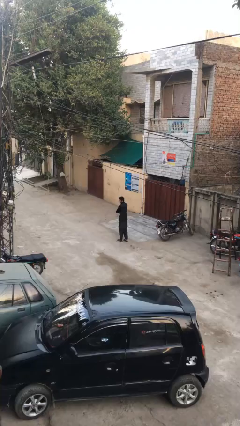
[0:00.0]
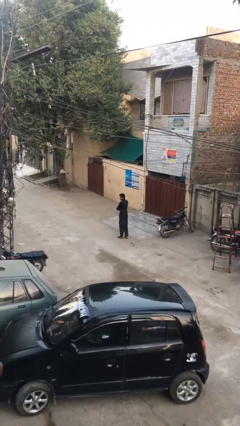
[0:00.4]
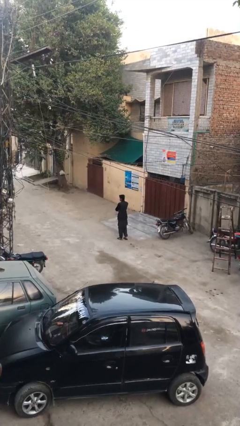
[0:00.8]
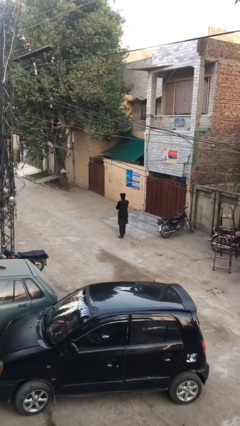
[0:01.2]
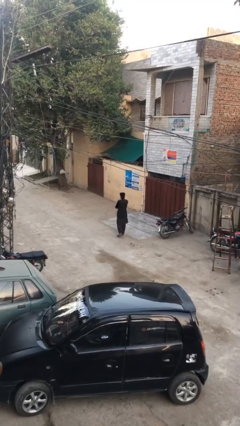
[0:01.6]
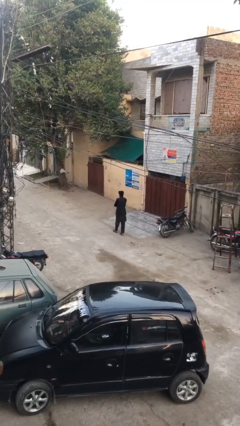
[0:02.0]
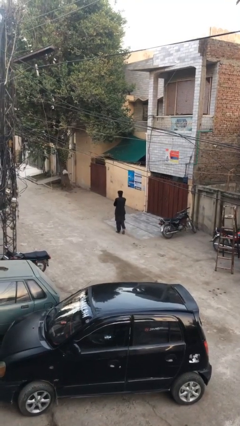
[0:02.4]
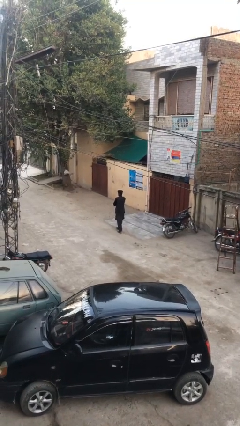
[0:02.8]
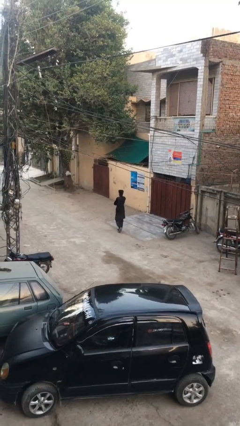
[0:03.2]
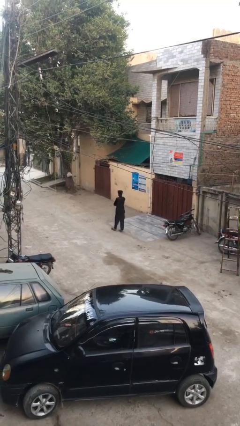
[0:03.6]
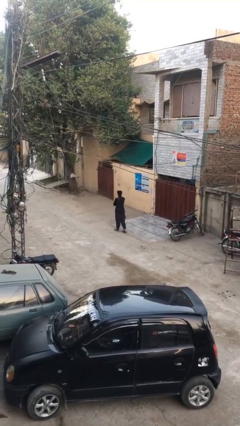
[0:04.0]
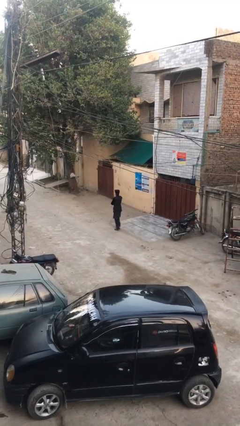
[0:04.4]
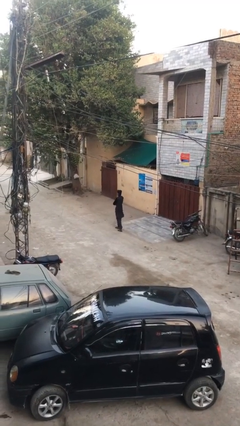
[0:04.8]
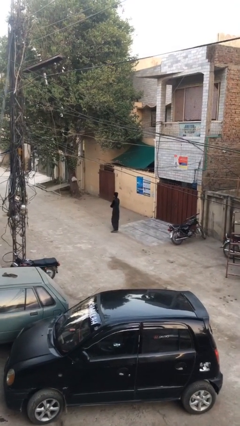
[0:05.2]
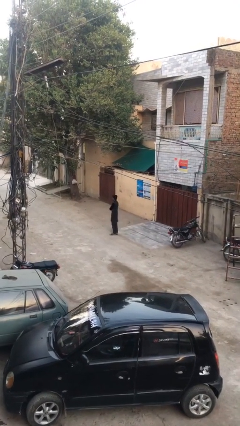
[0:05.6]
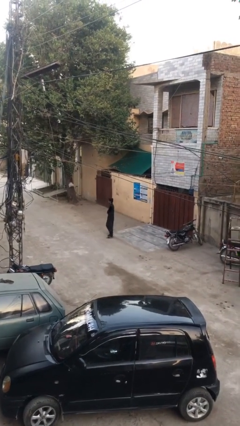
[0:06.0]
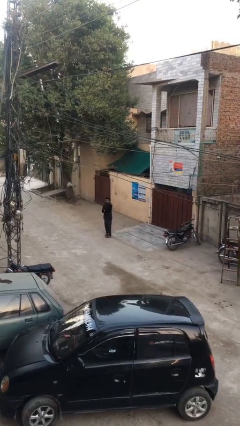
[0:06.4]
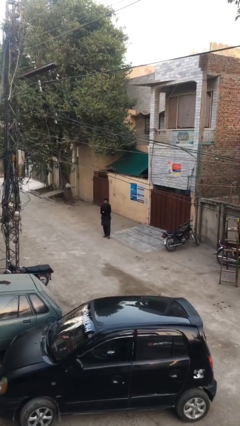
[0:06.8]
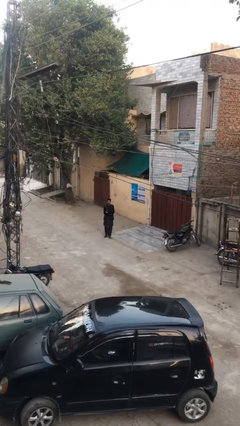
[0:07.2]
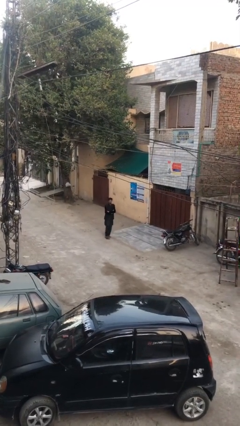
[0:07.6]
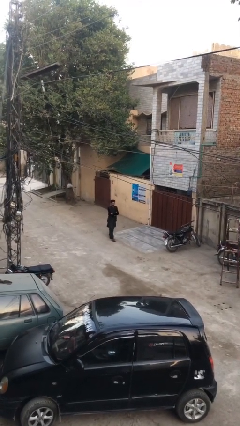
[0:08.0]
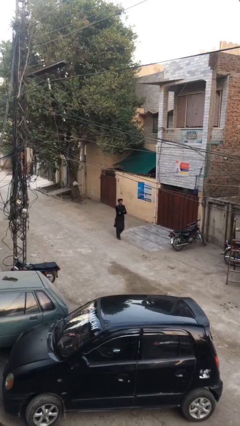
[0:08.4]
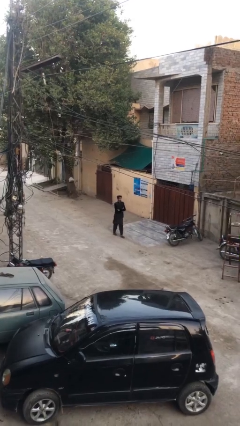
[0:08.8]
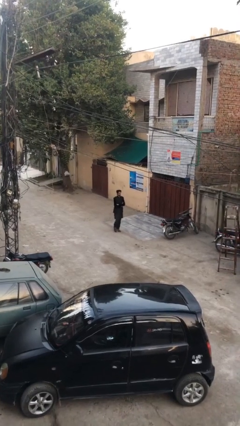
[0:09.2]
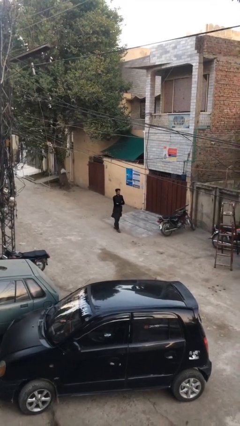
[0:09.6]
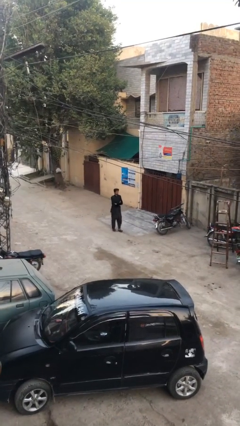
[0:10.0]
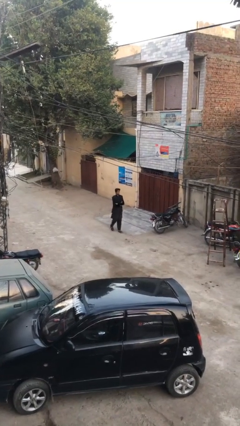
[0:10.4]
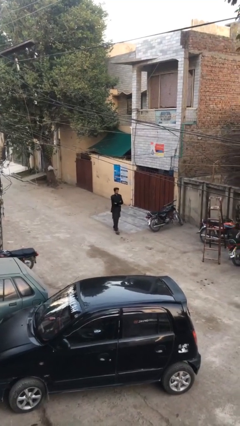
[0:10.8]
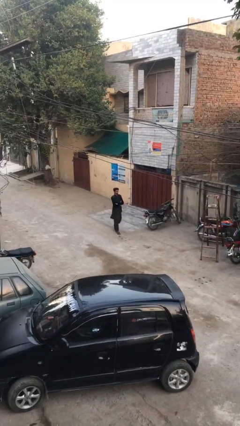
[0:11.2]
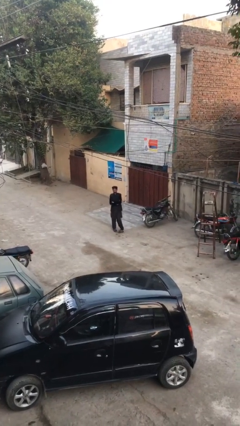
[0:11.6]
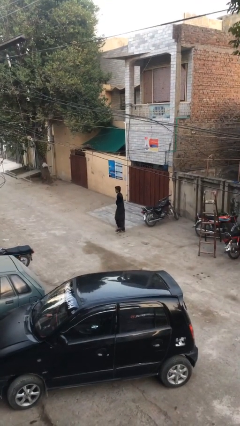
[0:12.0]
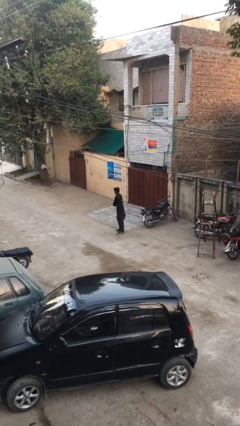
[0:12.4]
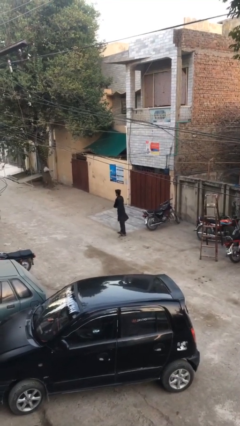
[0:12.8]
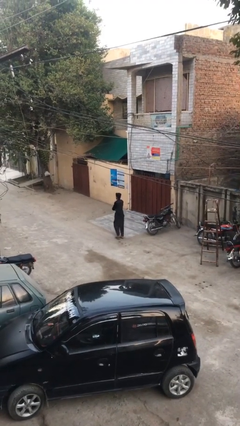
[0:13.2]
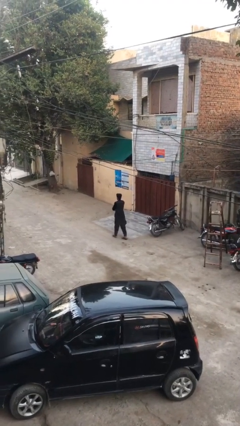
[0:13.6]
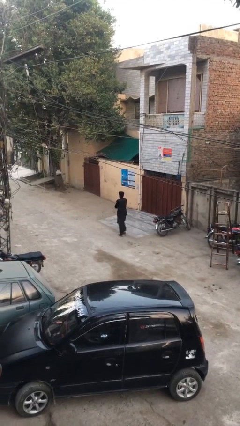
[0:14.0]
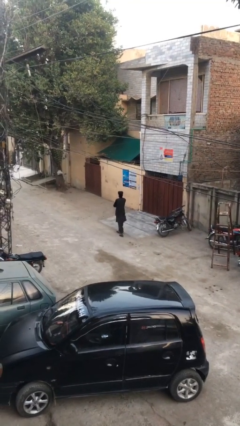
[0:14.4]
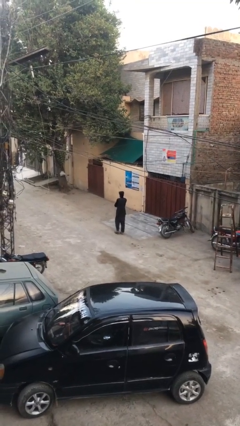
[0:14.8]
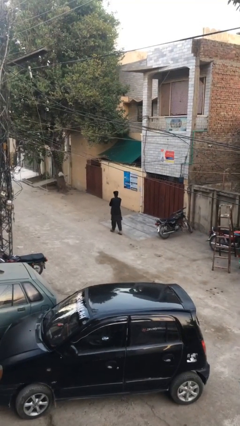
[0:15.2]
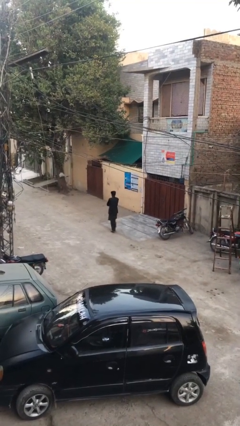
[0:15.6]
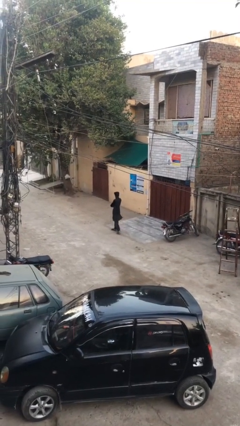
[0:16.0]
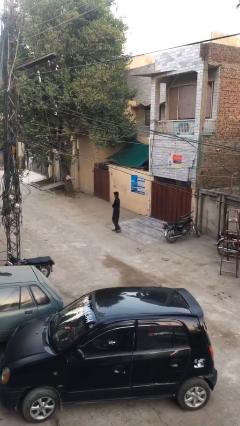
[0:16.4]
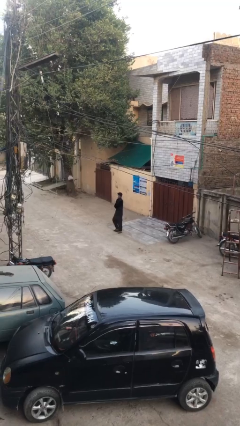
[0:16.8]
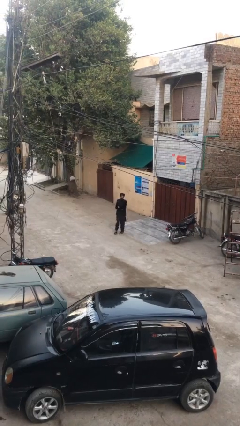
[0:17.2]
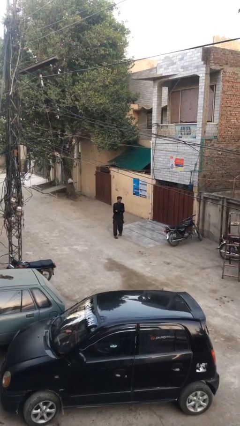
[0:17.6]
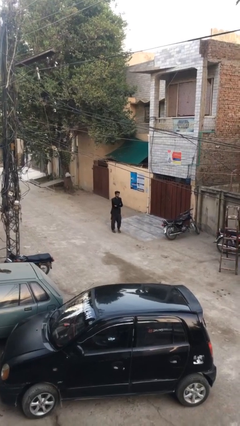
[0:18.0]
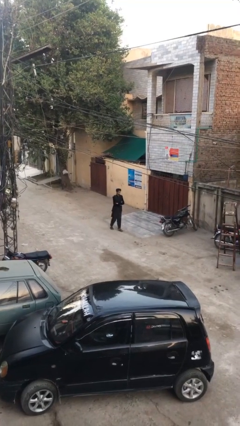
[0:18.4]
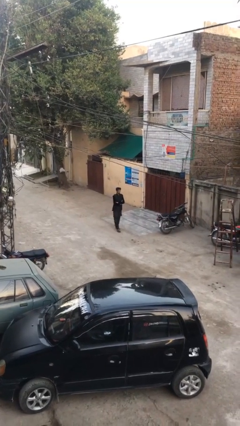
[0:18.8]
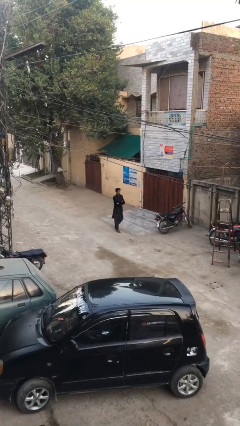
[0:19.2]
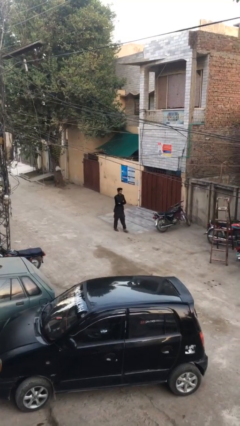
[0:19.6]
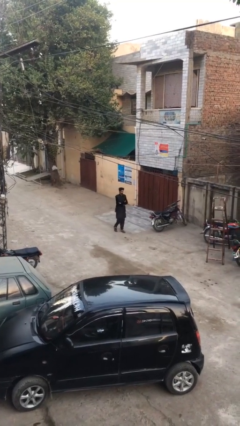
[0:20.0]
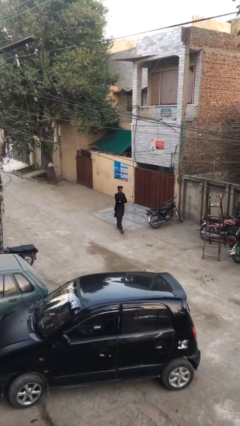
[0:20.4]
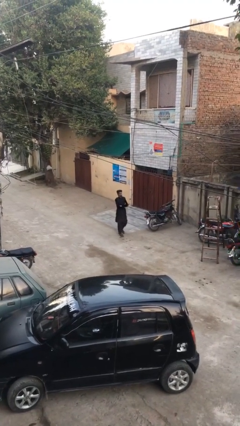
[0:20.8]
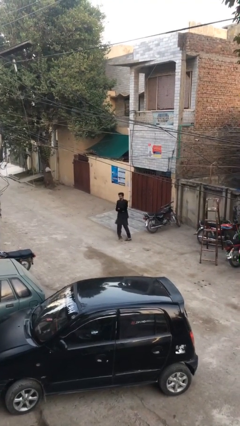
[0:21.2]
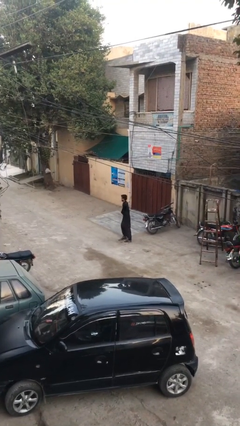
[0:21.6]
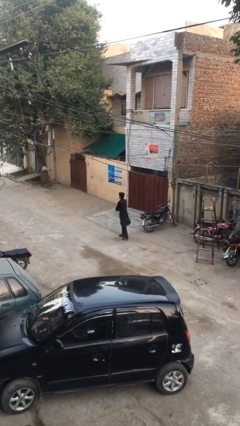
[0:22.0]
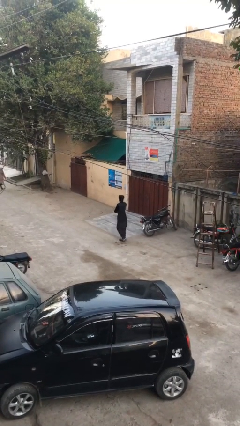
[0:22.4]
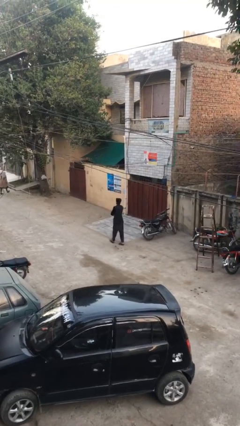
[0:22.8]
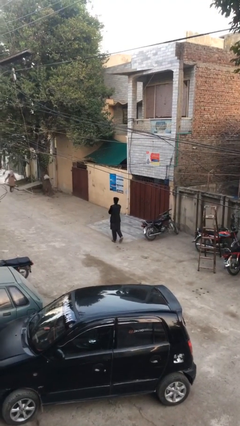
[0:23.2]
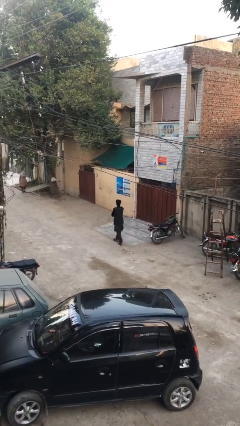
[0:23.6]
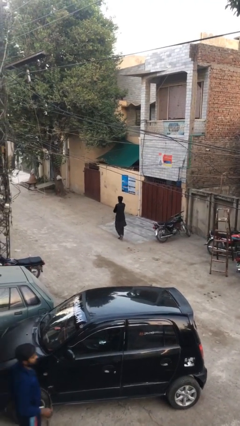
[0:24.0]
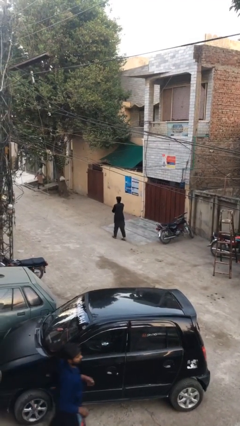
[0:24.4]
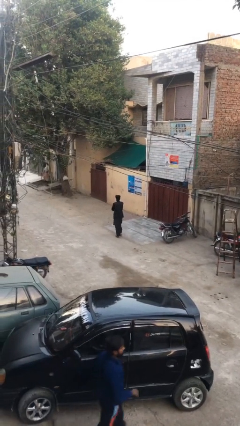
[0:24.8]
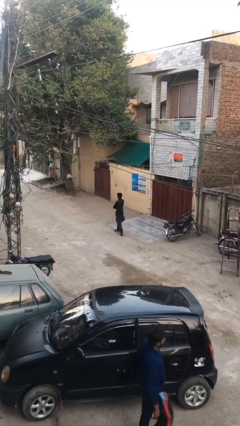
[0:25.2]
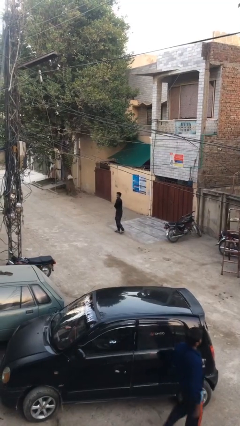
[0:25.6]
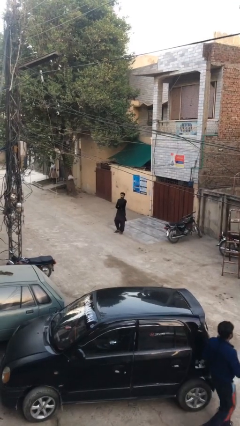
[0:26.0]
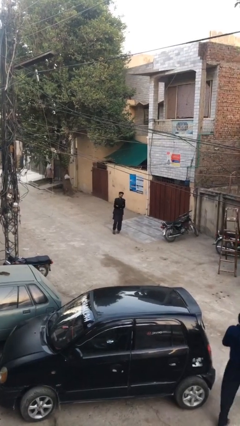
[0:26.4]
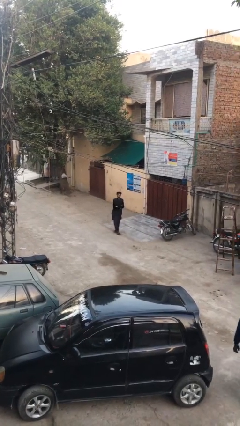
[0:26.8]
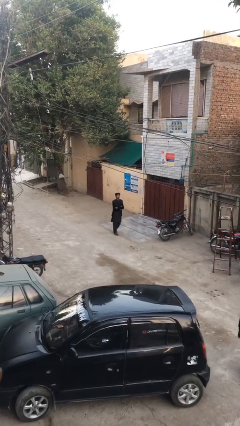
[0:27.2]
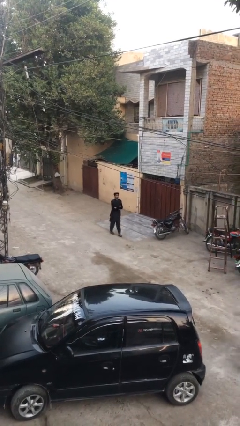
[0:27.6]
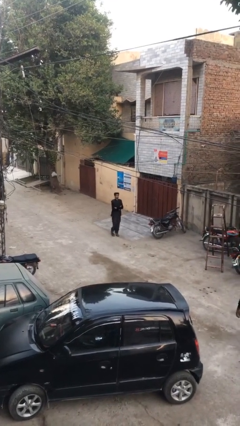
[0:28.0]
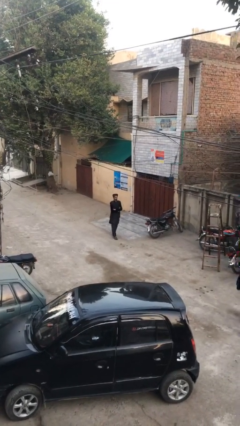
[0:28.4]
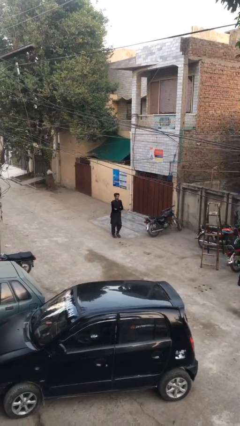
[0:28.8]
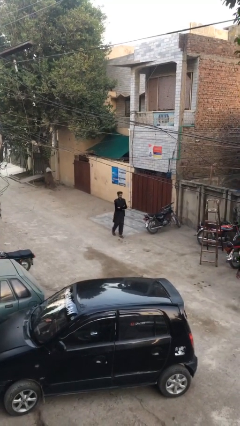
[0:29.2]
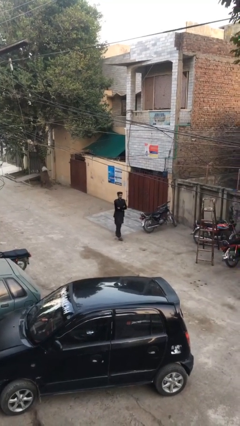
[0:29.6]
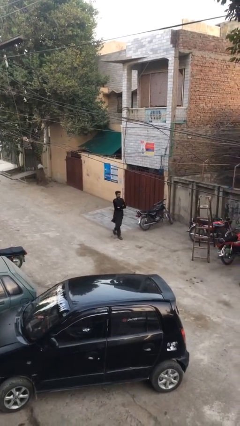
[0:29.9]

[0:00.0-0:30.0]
person walks

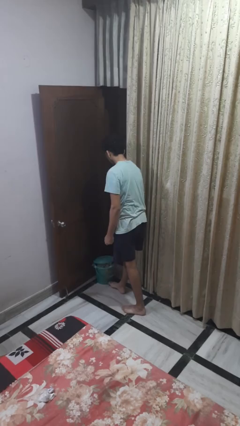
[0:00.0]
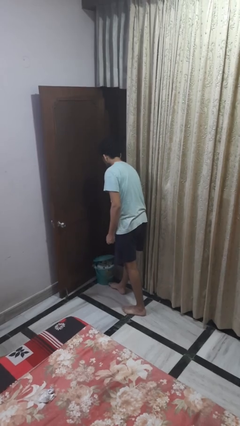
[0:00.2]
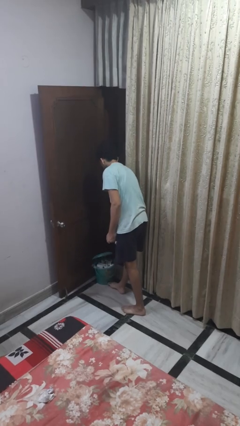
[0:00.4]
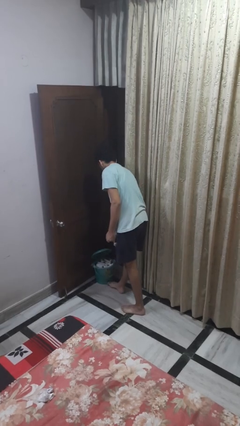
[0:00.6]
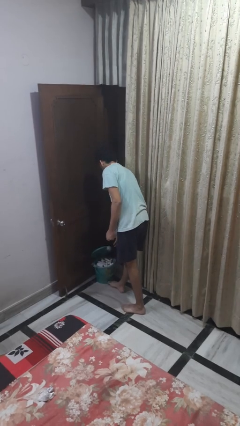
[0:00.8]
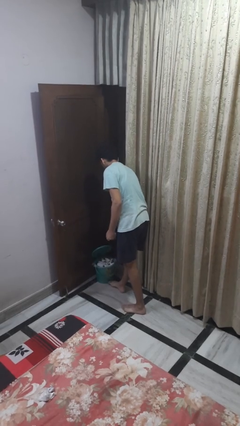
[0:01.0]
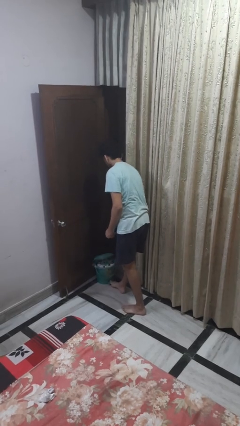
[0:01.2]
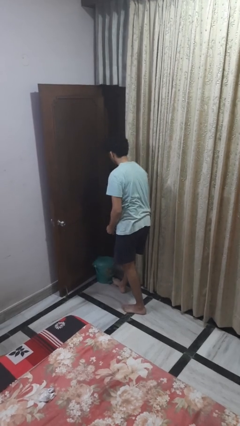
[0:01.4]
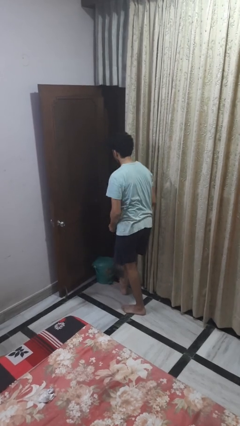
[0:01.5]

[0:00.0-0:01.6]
person discards trash

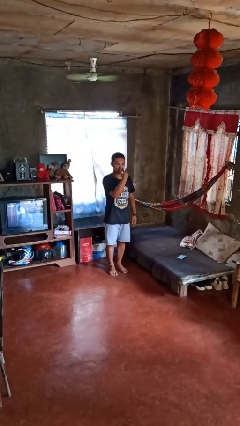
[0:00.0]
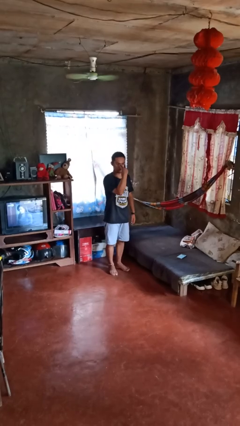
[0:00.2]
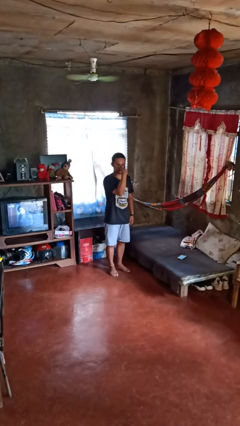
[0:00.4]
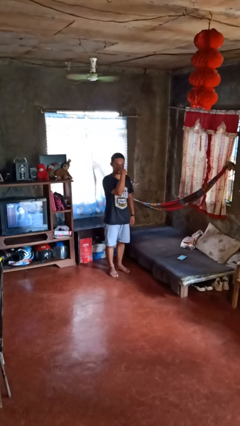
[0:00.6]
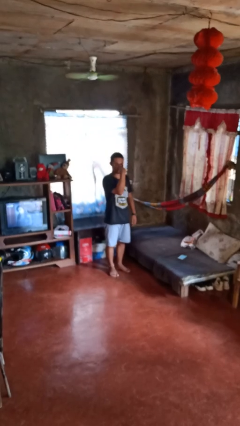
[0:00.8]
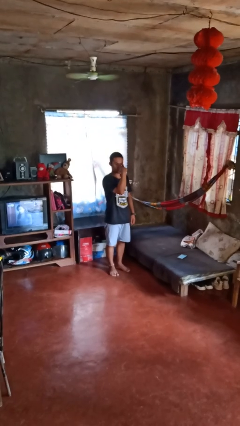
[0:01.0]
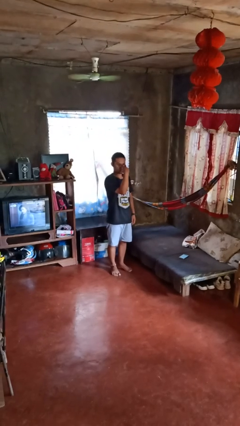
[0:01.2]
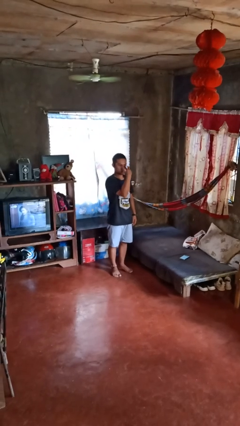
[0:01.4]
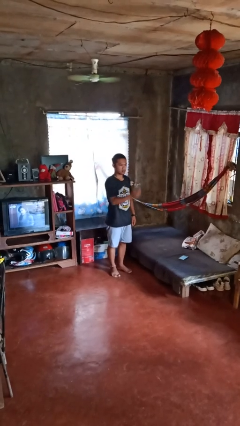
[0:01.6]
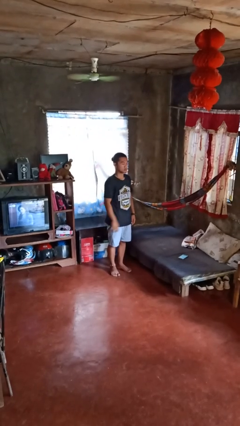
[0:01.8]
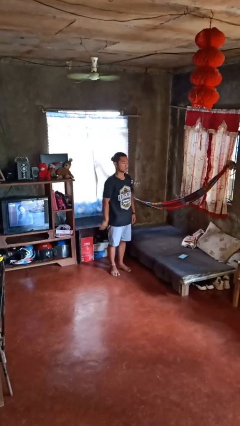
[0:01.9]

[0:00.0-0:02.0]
person gestures watch closely
